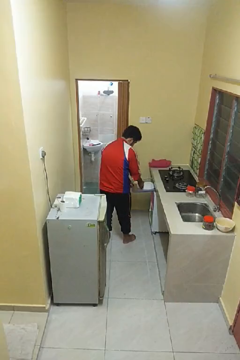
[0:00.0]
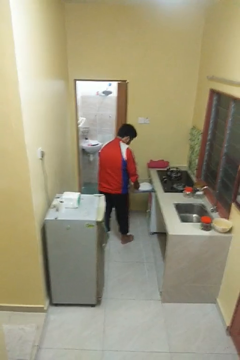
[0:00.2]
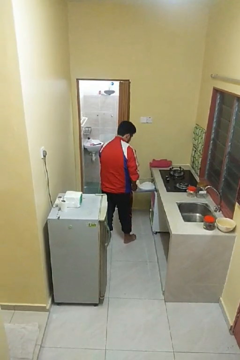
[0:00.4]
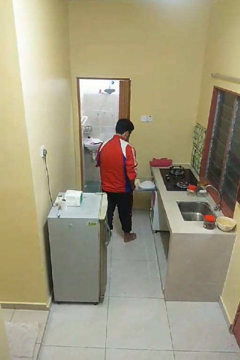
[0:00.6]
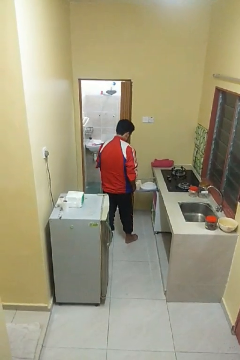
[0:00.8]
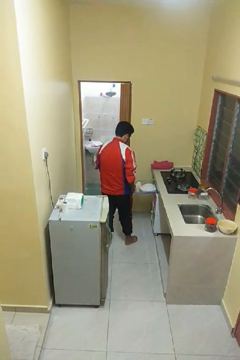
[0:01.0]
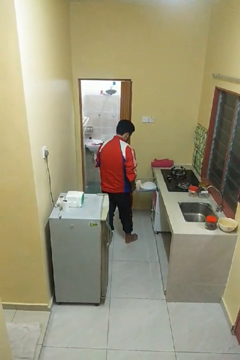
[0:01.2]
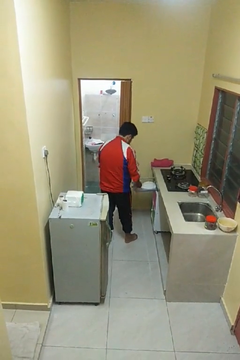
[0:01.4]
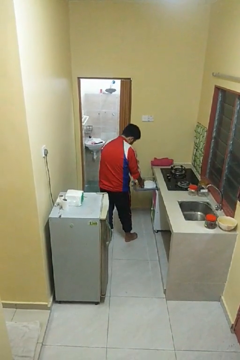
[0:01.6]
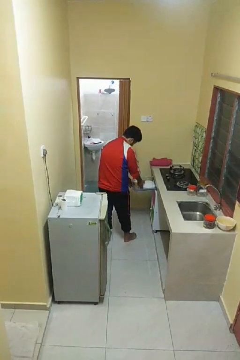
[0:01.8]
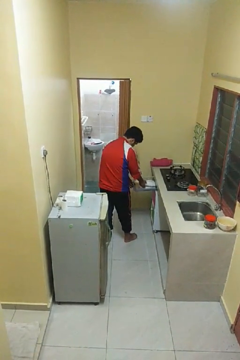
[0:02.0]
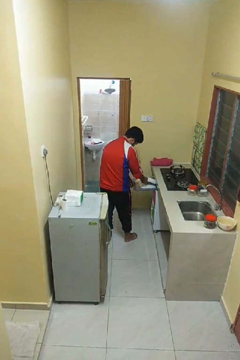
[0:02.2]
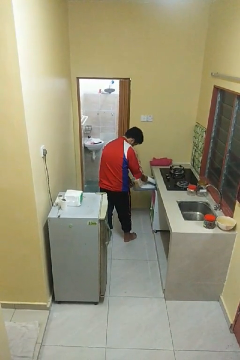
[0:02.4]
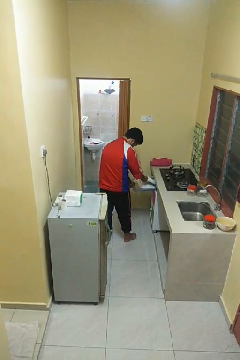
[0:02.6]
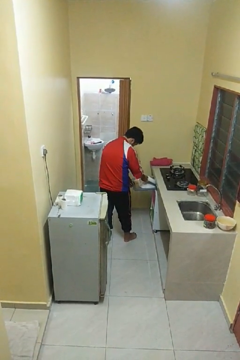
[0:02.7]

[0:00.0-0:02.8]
person searches in kitchen drawer

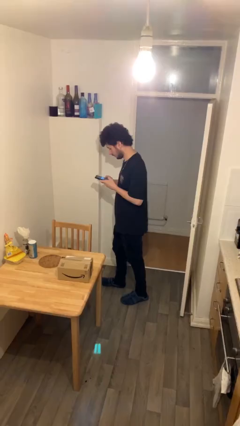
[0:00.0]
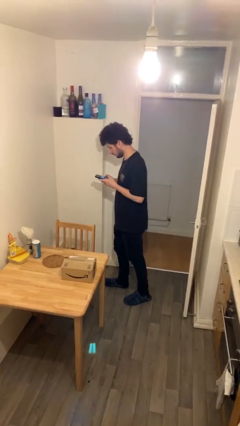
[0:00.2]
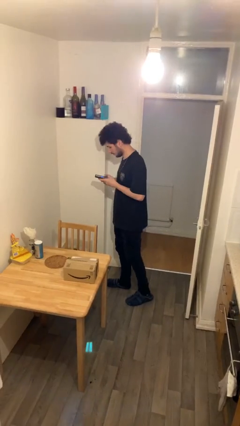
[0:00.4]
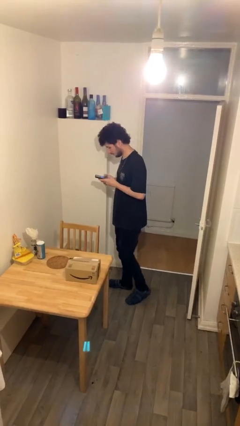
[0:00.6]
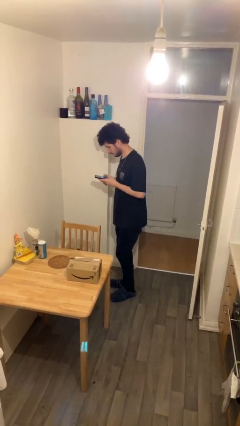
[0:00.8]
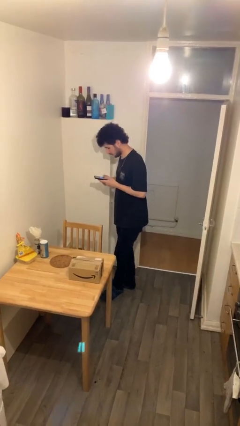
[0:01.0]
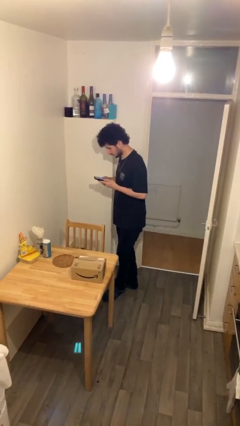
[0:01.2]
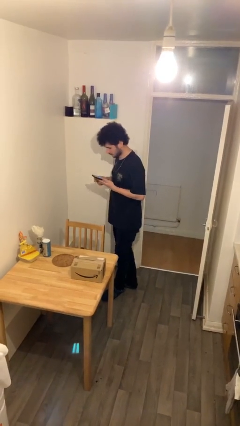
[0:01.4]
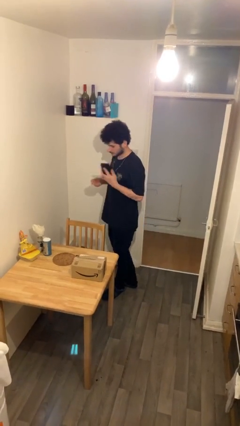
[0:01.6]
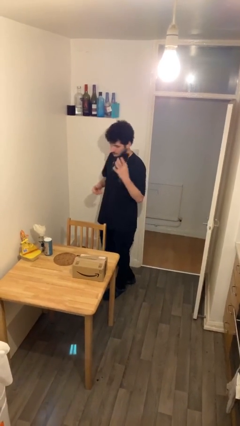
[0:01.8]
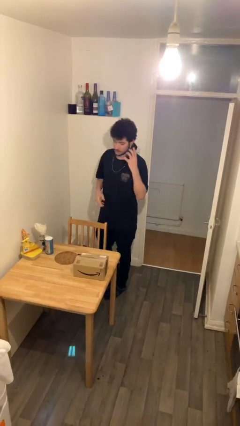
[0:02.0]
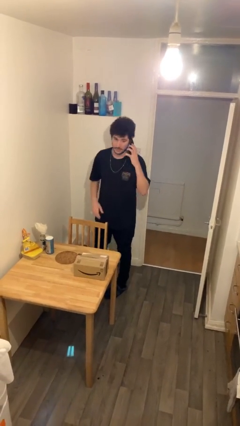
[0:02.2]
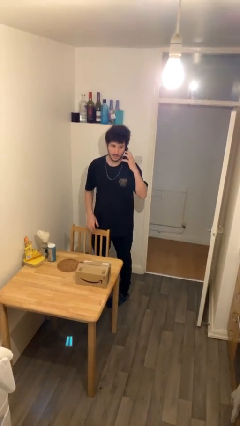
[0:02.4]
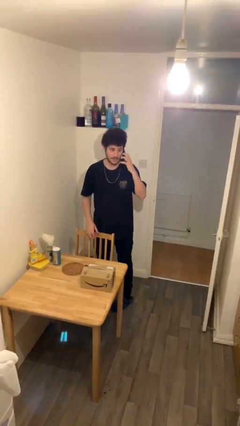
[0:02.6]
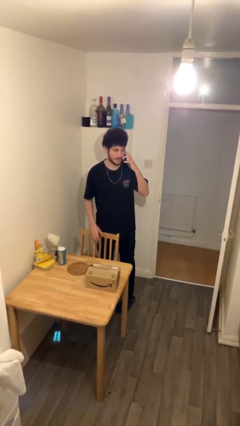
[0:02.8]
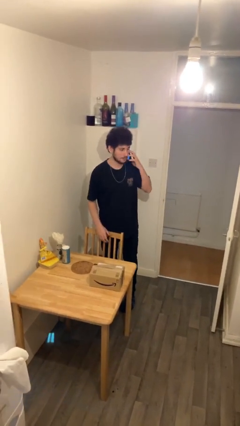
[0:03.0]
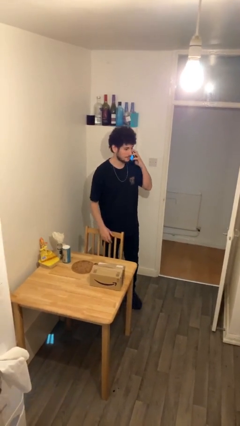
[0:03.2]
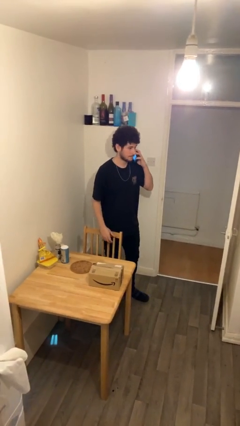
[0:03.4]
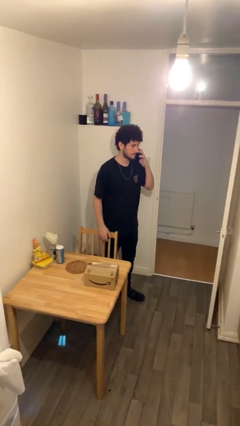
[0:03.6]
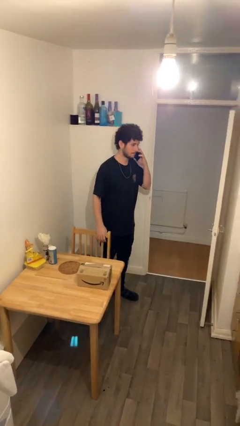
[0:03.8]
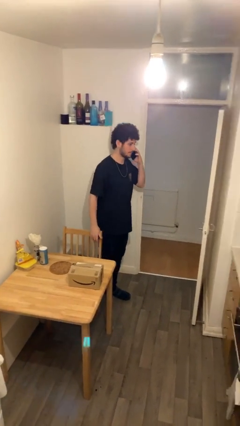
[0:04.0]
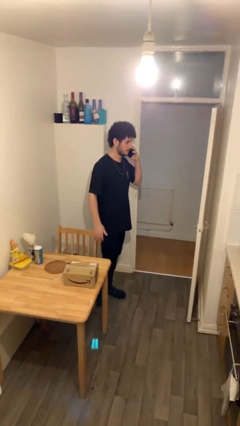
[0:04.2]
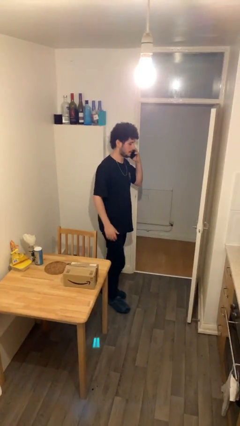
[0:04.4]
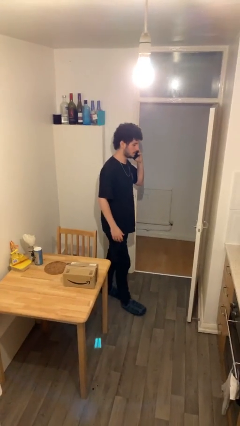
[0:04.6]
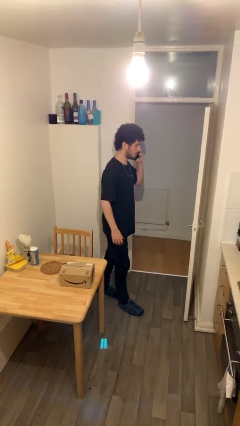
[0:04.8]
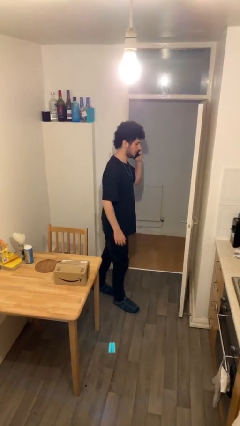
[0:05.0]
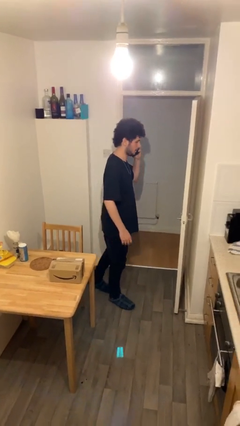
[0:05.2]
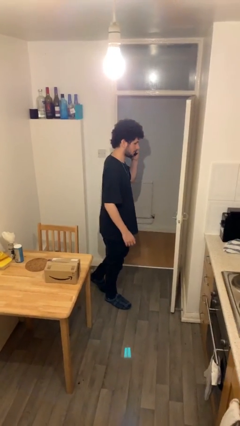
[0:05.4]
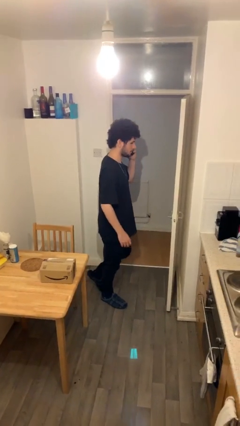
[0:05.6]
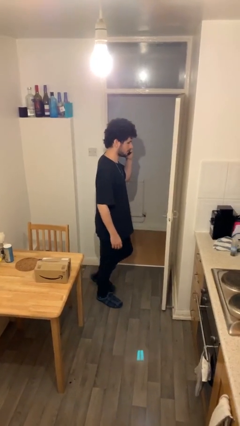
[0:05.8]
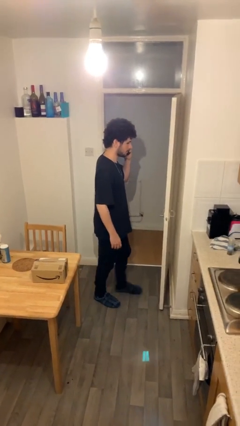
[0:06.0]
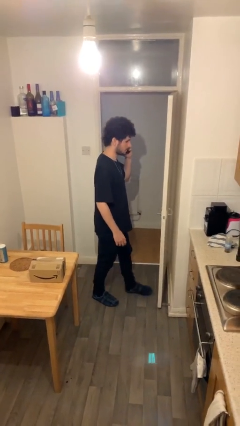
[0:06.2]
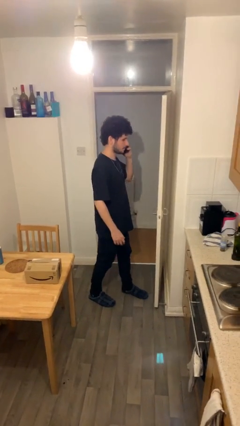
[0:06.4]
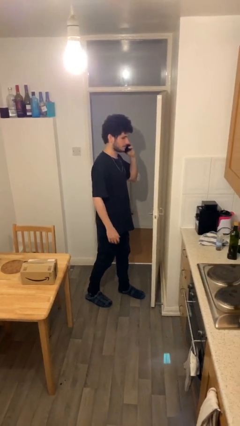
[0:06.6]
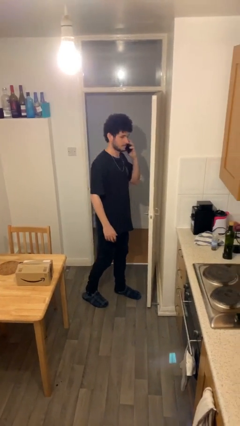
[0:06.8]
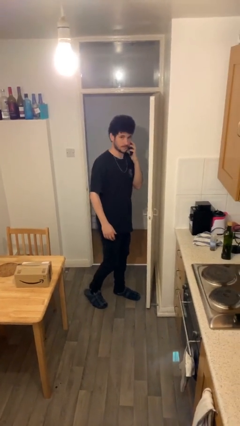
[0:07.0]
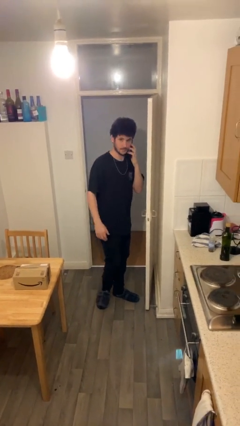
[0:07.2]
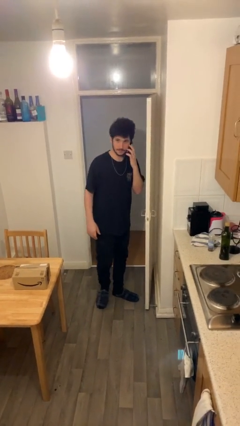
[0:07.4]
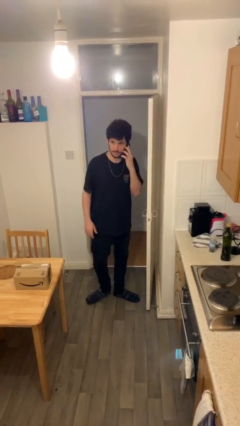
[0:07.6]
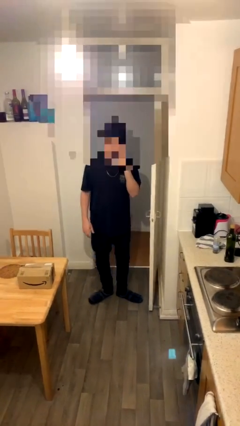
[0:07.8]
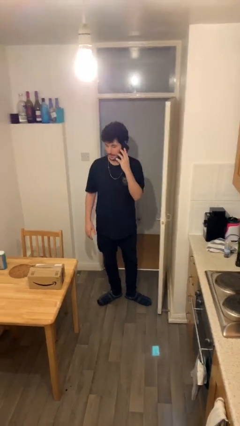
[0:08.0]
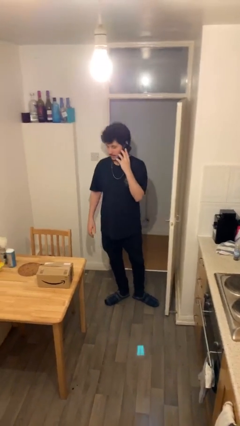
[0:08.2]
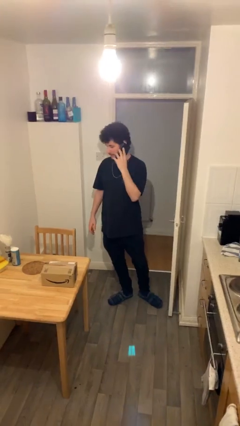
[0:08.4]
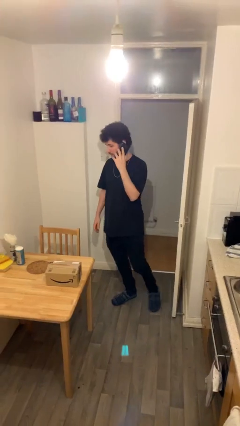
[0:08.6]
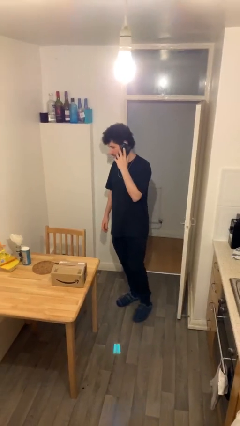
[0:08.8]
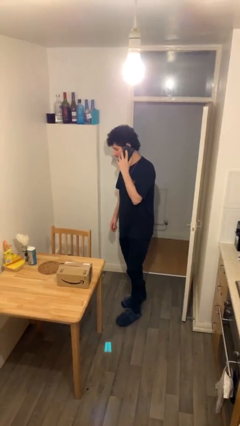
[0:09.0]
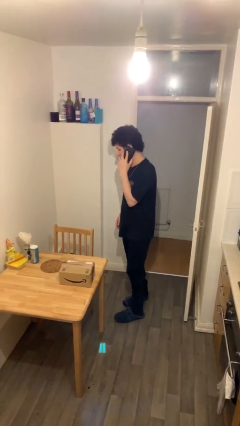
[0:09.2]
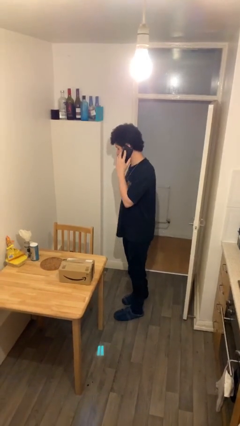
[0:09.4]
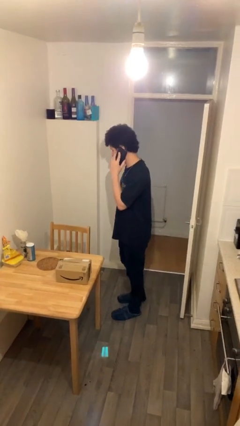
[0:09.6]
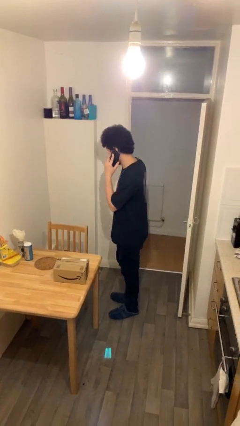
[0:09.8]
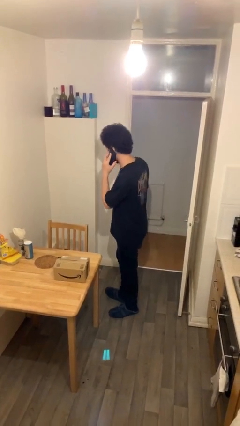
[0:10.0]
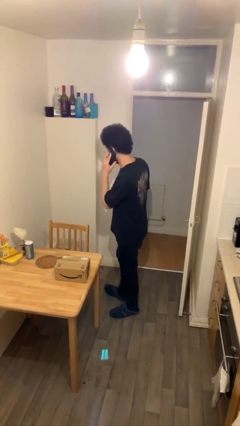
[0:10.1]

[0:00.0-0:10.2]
person talks on phone

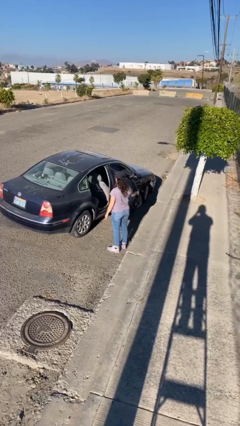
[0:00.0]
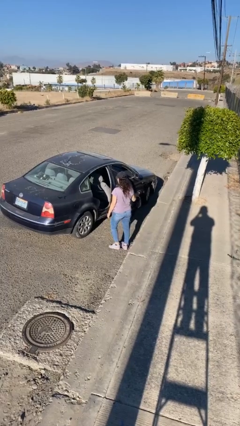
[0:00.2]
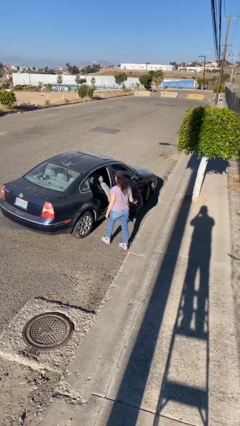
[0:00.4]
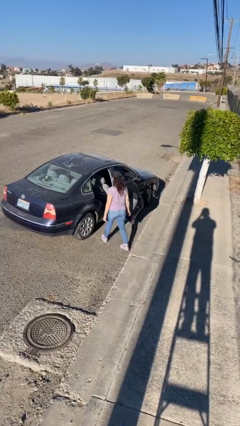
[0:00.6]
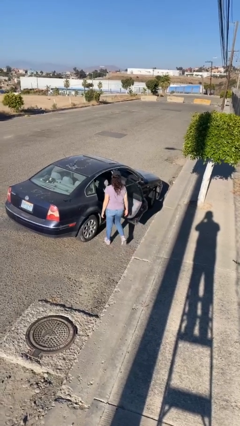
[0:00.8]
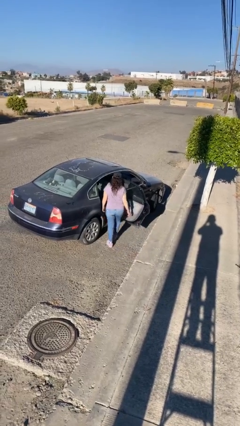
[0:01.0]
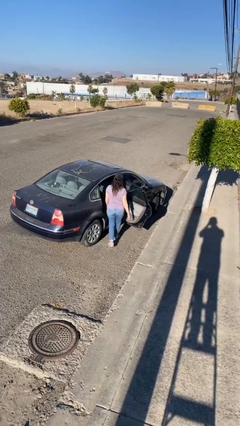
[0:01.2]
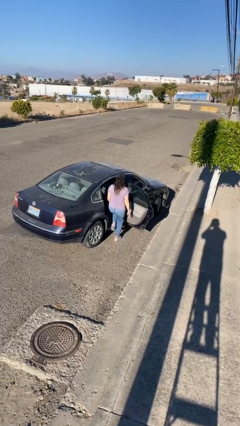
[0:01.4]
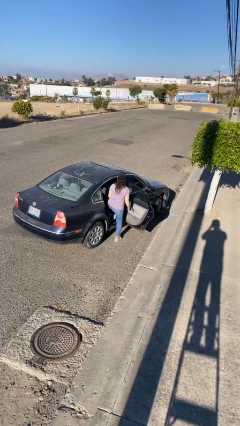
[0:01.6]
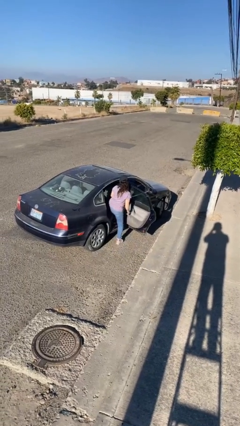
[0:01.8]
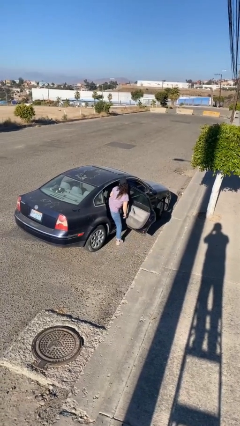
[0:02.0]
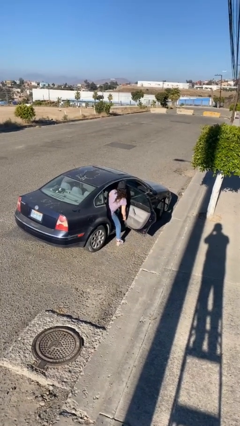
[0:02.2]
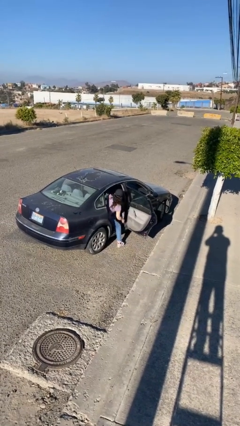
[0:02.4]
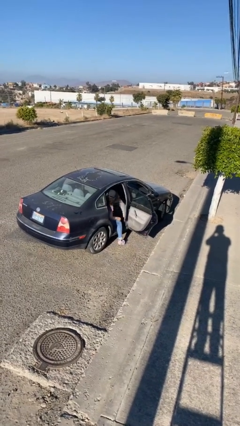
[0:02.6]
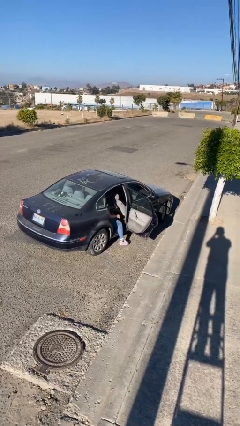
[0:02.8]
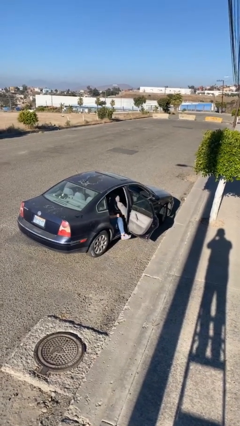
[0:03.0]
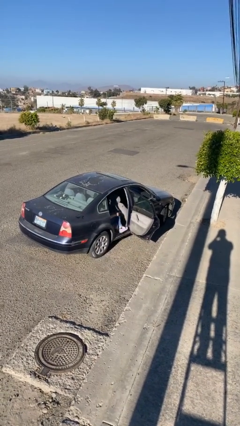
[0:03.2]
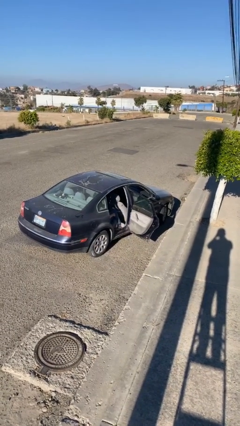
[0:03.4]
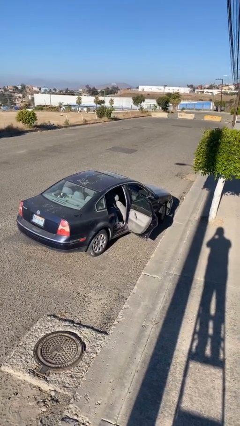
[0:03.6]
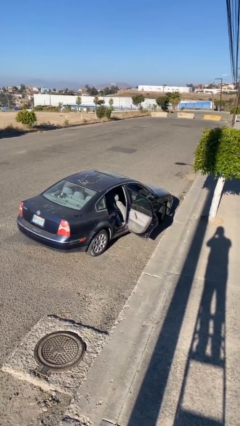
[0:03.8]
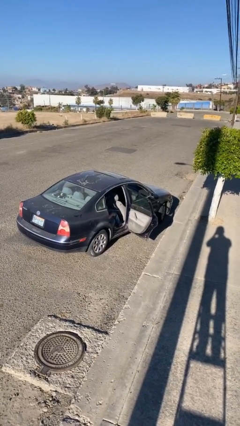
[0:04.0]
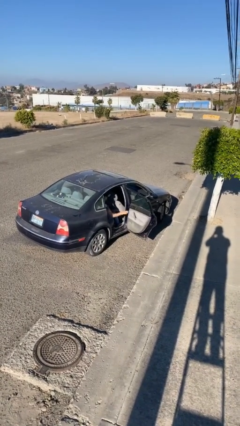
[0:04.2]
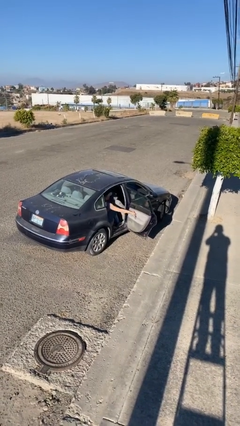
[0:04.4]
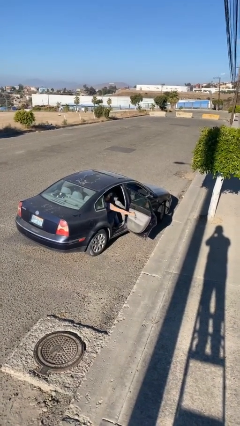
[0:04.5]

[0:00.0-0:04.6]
person enters car

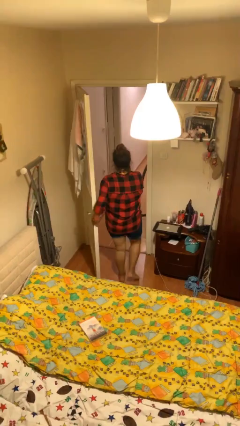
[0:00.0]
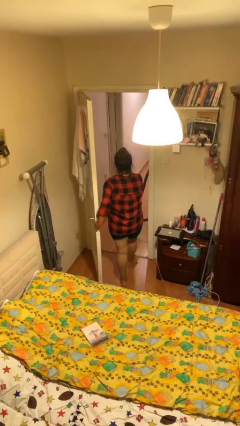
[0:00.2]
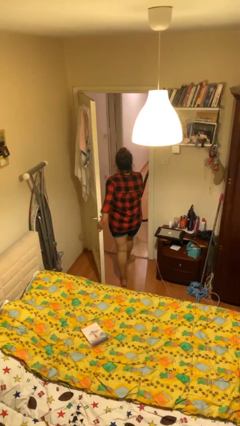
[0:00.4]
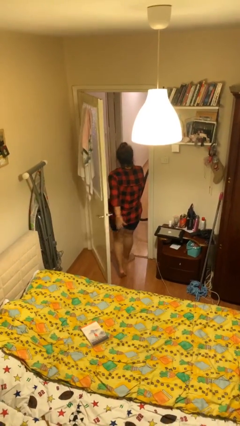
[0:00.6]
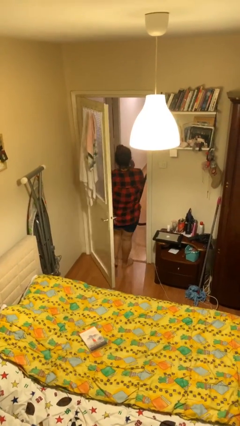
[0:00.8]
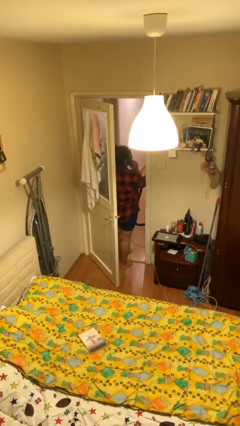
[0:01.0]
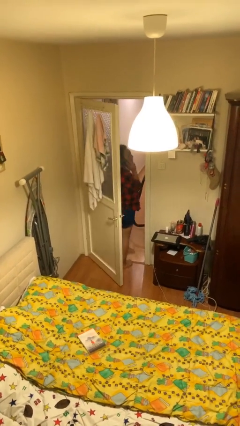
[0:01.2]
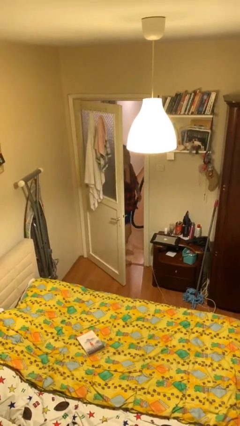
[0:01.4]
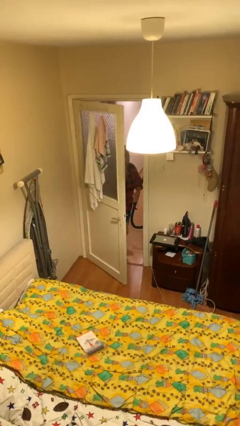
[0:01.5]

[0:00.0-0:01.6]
person exits scene through structure
